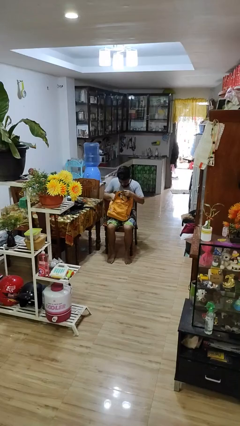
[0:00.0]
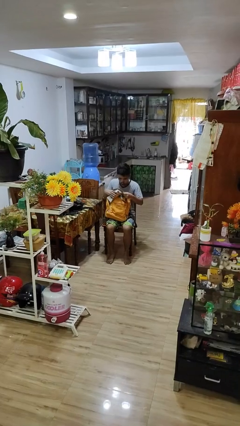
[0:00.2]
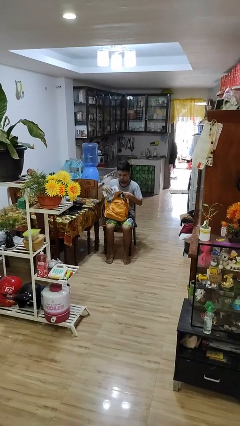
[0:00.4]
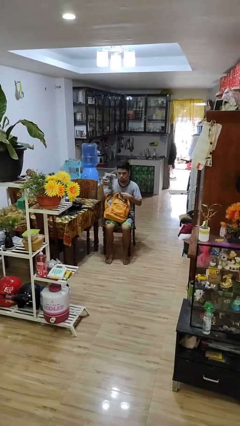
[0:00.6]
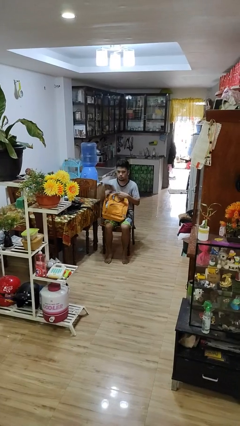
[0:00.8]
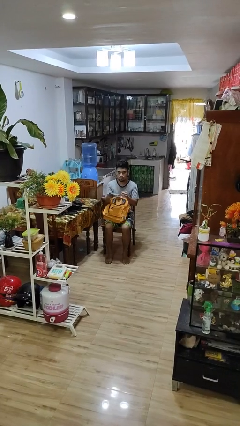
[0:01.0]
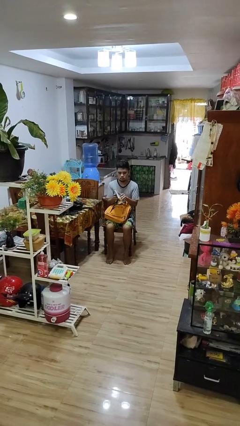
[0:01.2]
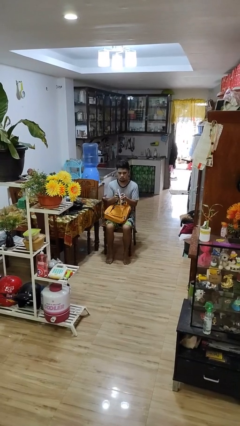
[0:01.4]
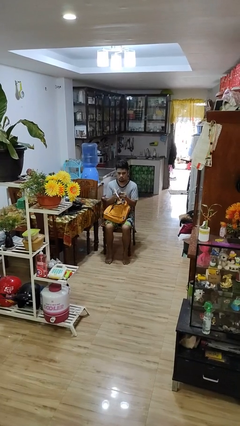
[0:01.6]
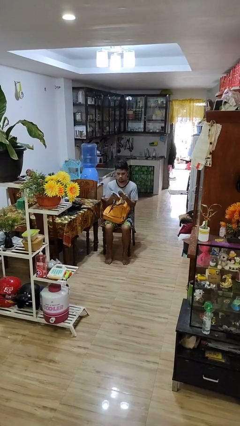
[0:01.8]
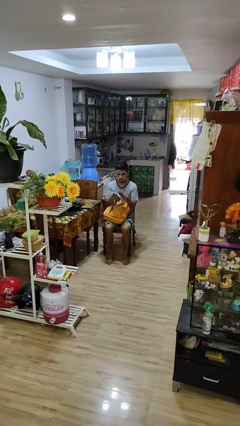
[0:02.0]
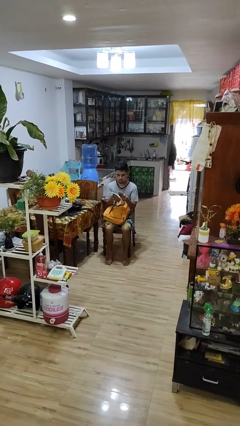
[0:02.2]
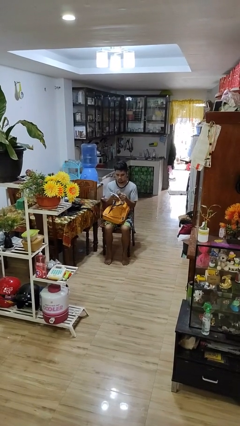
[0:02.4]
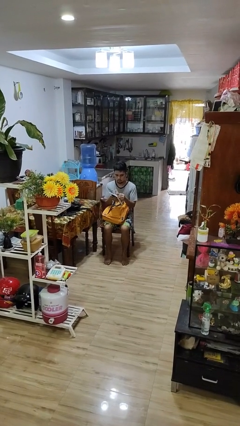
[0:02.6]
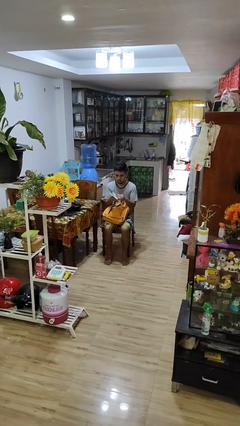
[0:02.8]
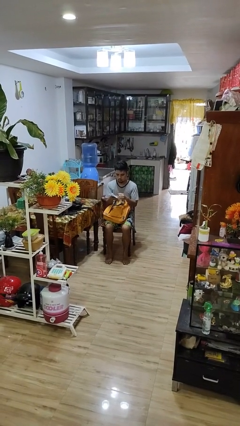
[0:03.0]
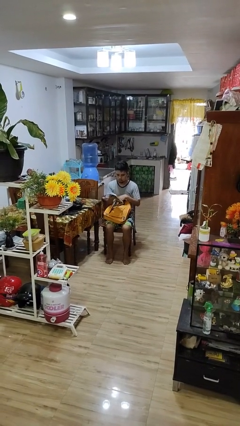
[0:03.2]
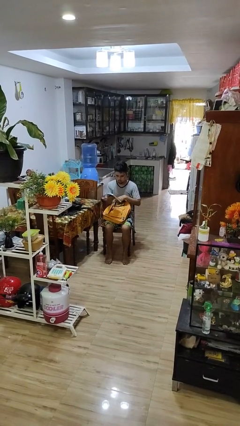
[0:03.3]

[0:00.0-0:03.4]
person takes object from backpack

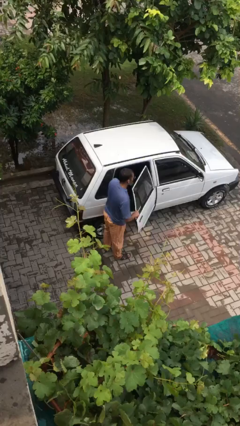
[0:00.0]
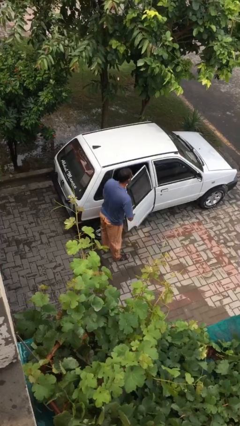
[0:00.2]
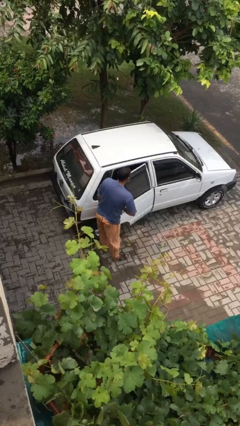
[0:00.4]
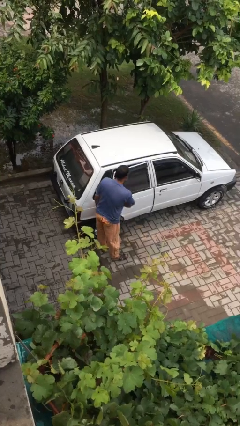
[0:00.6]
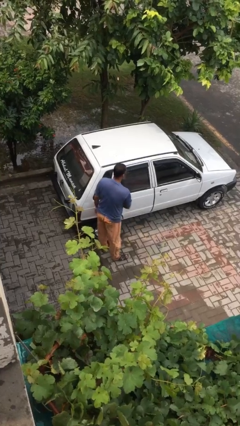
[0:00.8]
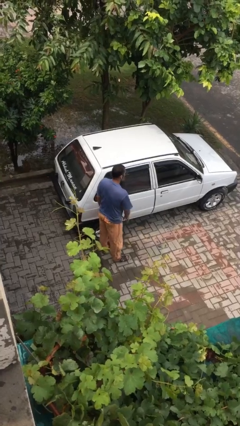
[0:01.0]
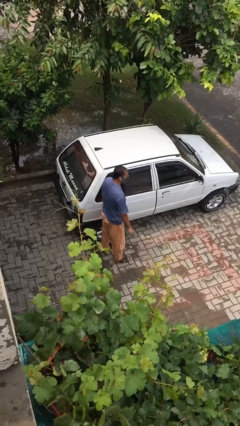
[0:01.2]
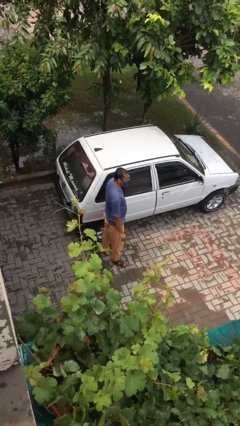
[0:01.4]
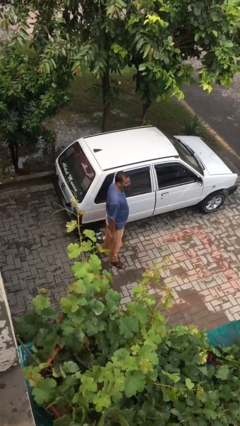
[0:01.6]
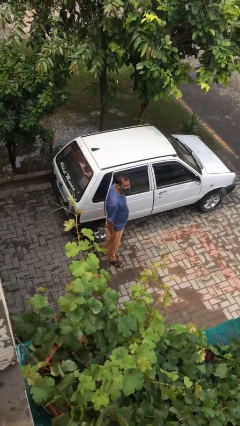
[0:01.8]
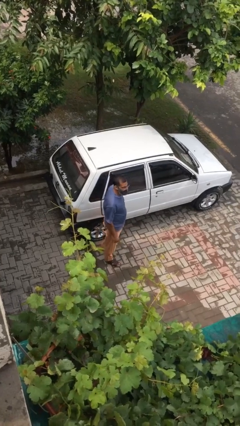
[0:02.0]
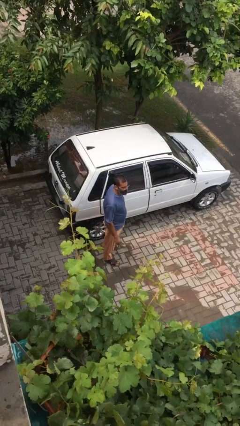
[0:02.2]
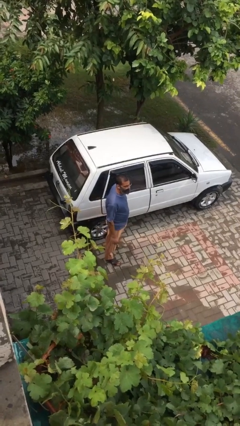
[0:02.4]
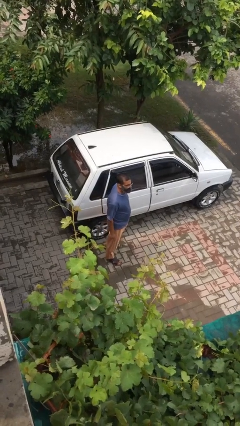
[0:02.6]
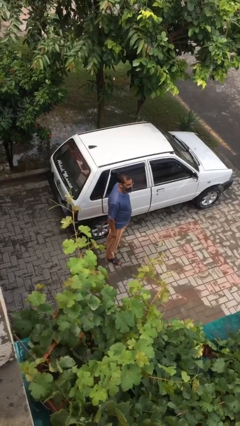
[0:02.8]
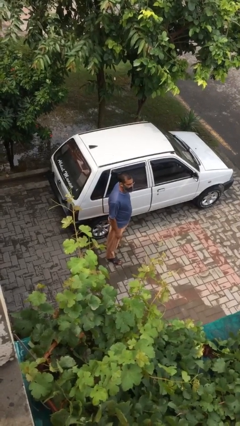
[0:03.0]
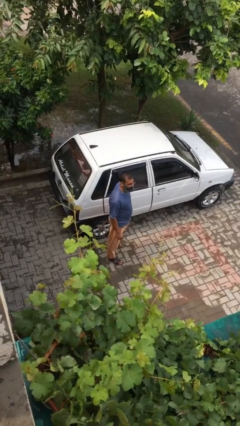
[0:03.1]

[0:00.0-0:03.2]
person closes car door

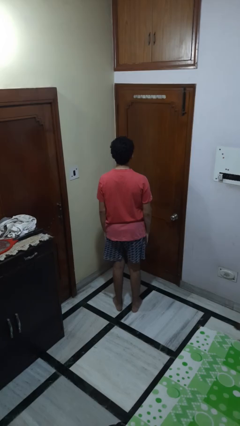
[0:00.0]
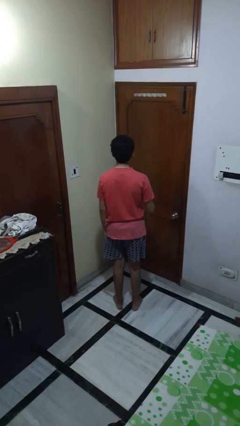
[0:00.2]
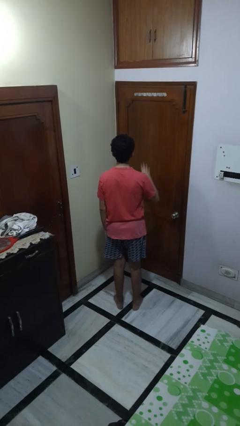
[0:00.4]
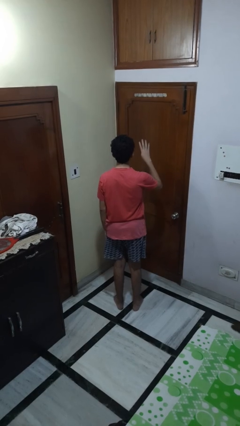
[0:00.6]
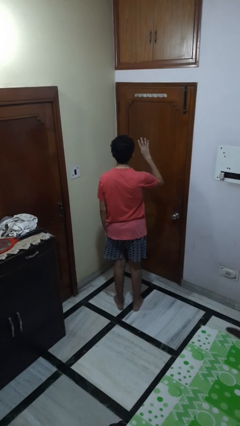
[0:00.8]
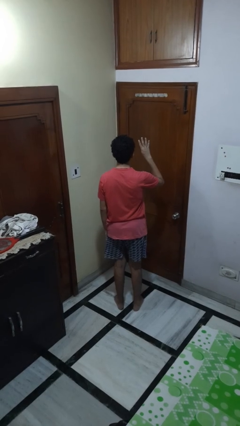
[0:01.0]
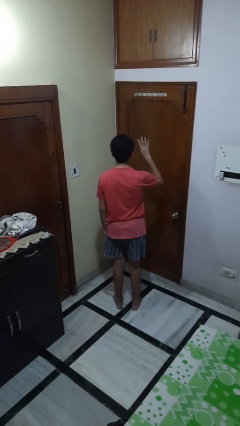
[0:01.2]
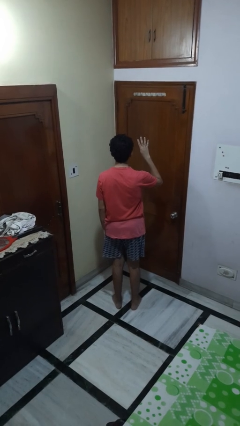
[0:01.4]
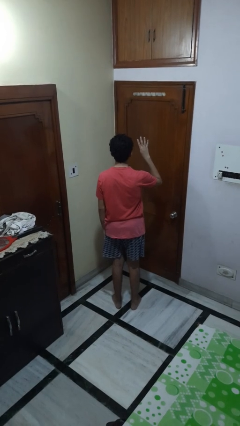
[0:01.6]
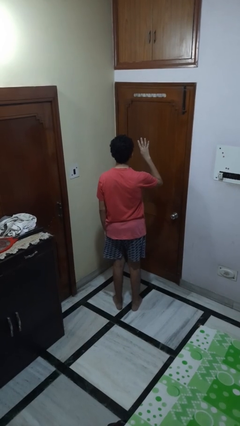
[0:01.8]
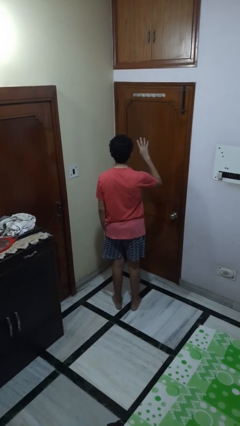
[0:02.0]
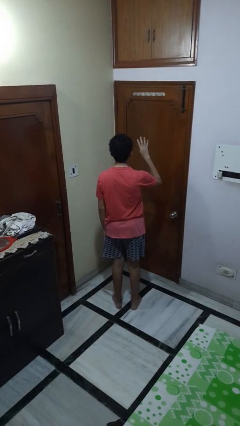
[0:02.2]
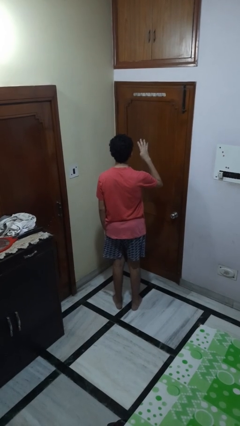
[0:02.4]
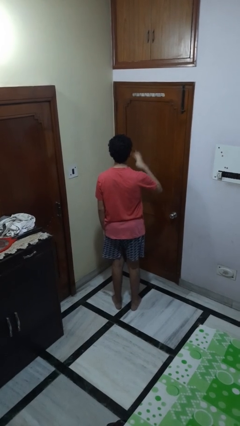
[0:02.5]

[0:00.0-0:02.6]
person gestures number four

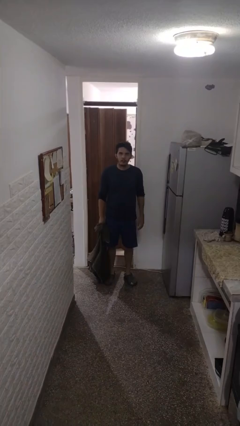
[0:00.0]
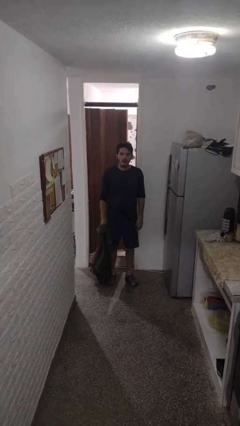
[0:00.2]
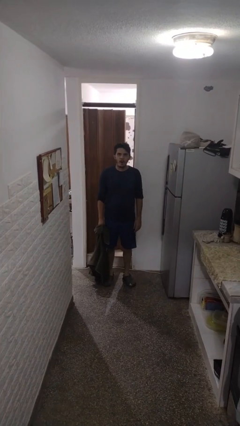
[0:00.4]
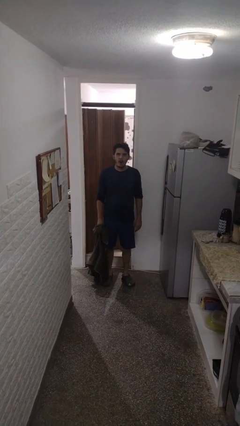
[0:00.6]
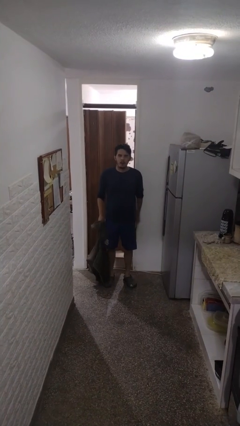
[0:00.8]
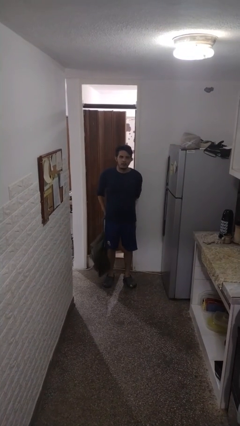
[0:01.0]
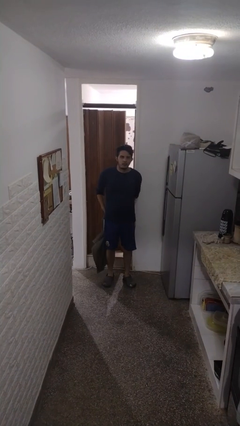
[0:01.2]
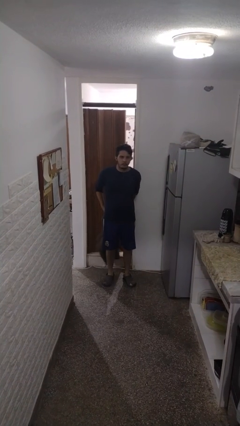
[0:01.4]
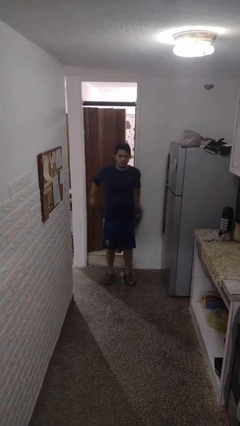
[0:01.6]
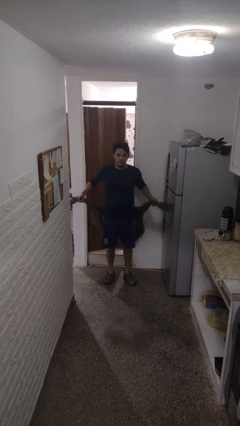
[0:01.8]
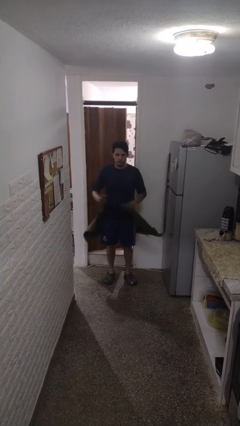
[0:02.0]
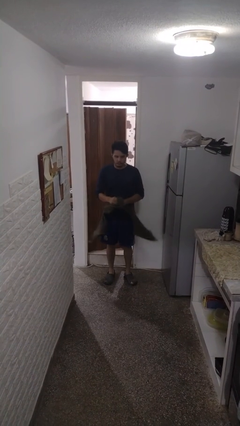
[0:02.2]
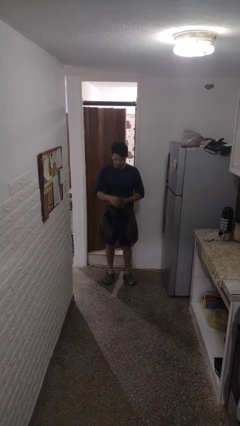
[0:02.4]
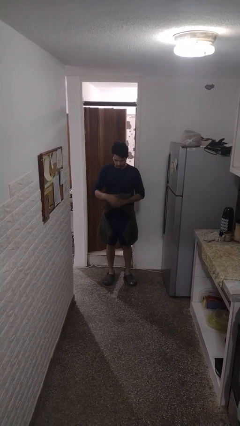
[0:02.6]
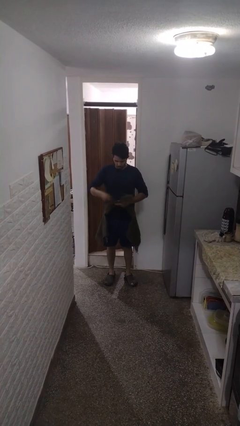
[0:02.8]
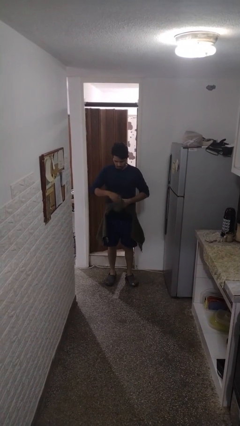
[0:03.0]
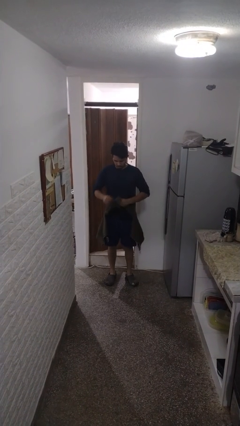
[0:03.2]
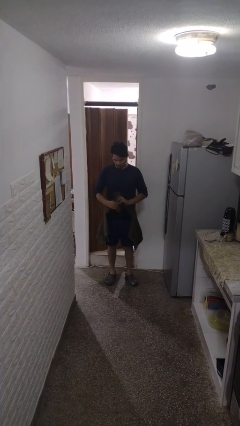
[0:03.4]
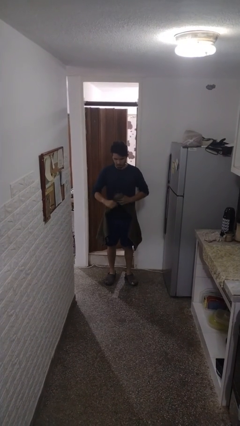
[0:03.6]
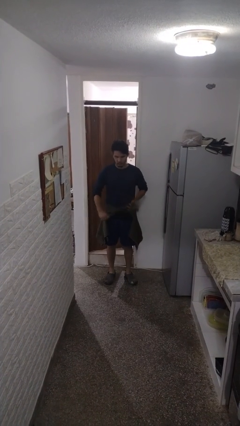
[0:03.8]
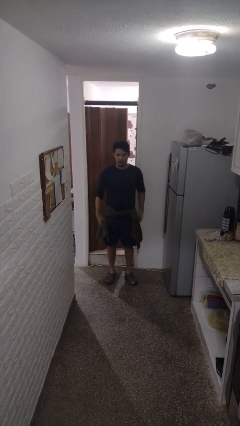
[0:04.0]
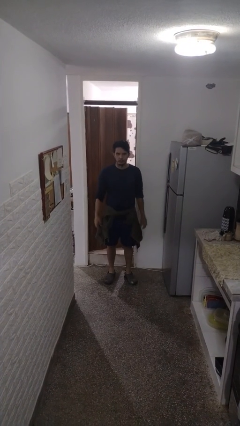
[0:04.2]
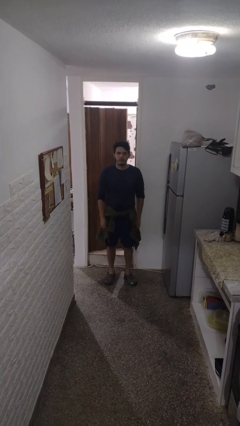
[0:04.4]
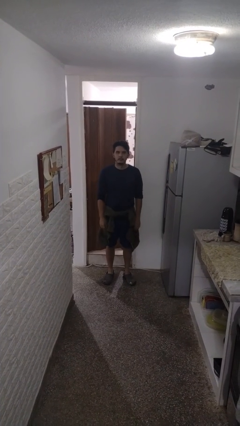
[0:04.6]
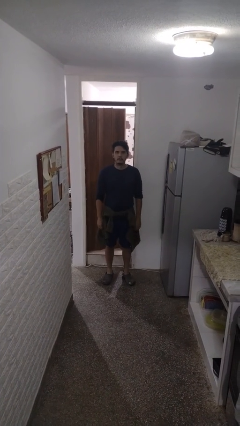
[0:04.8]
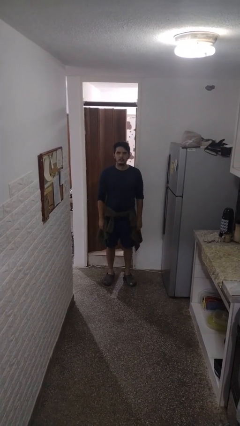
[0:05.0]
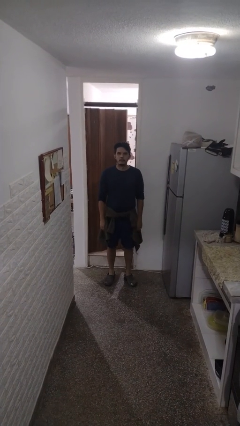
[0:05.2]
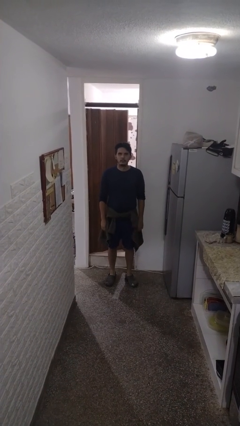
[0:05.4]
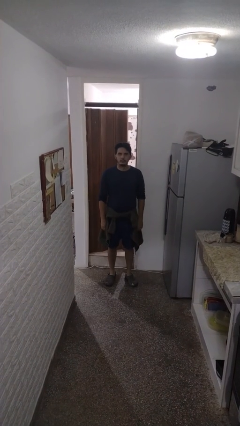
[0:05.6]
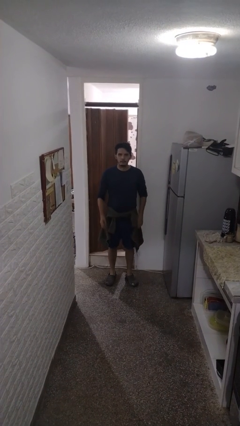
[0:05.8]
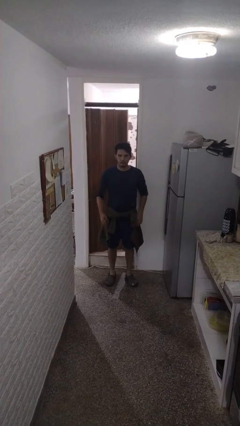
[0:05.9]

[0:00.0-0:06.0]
person ties jacket around waist

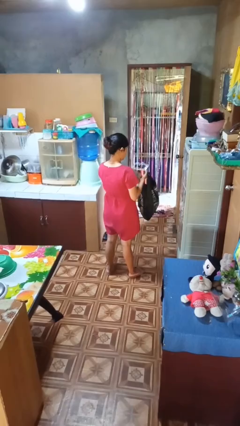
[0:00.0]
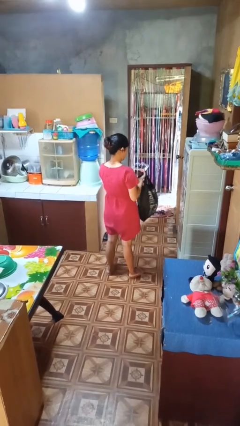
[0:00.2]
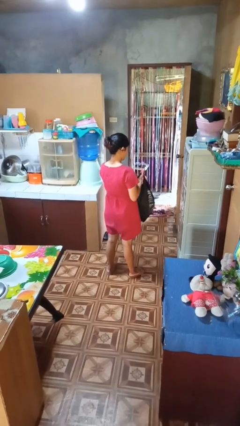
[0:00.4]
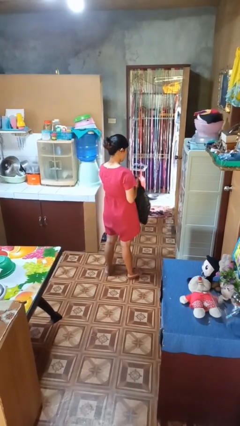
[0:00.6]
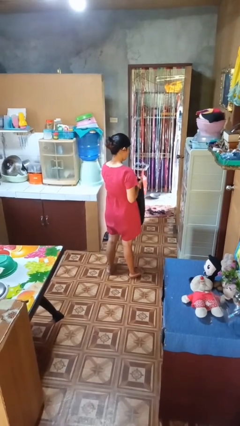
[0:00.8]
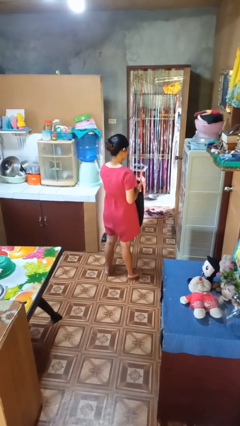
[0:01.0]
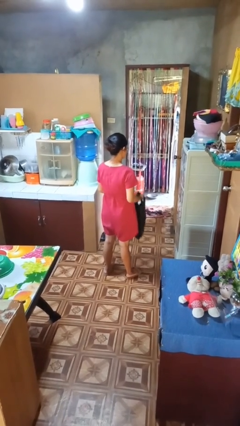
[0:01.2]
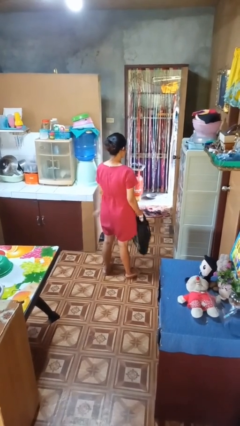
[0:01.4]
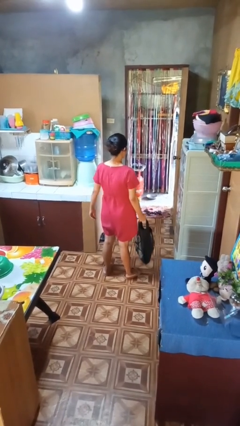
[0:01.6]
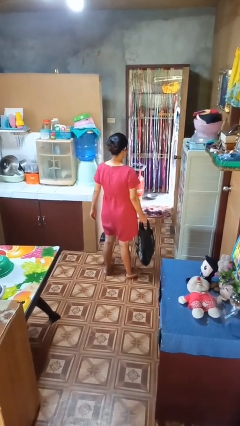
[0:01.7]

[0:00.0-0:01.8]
person puts object into bag

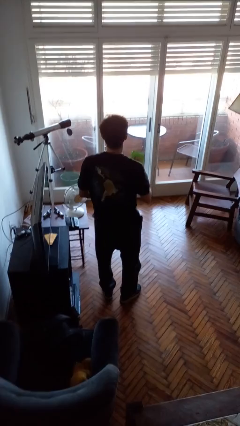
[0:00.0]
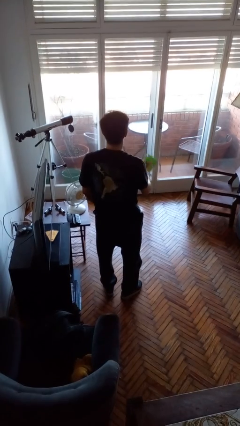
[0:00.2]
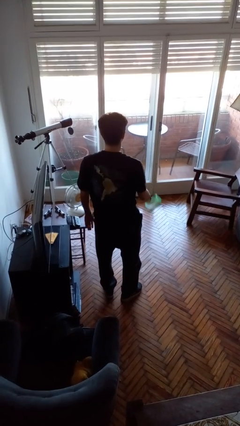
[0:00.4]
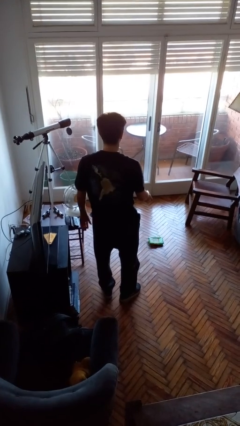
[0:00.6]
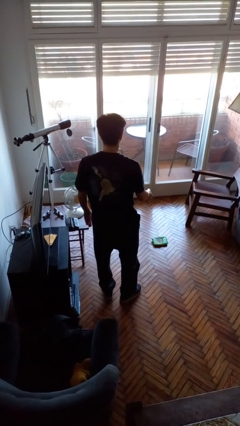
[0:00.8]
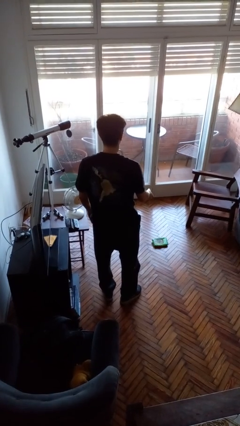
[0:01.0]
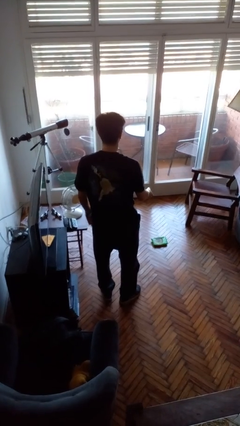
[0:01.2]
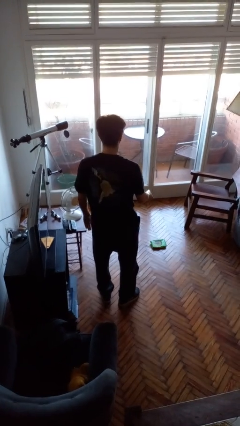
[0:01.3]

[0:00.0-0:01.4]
person throws object to ground
